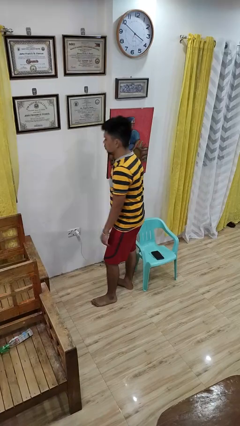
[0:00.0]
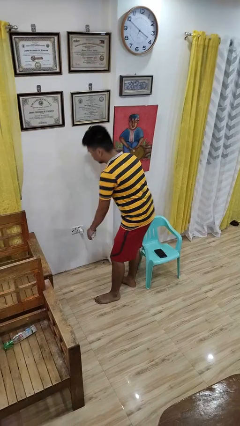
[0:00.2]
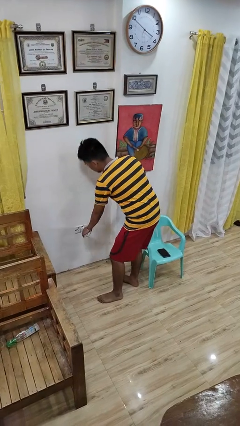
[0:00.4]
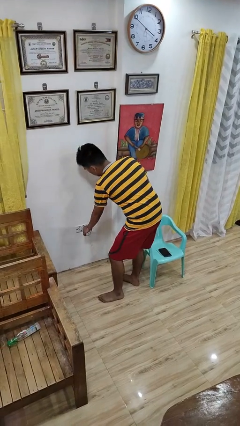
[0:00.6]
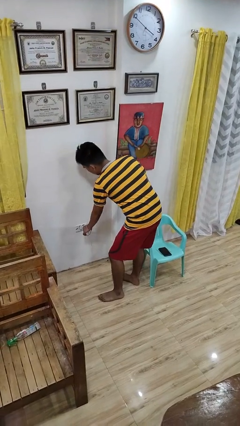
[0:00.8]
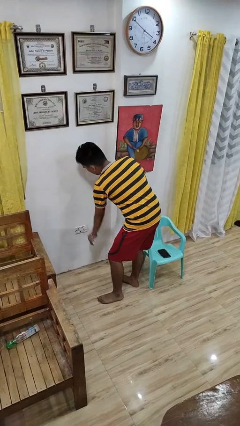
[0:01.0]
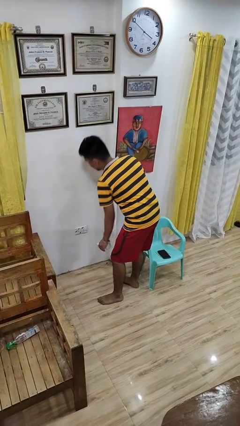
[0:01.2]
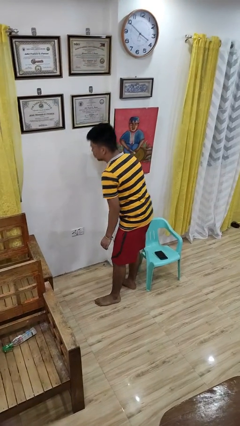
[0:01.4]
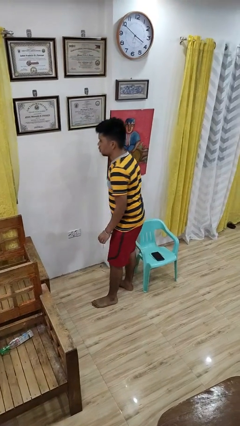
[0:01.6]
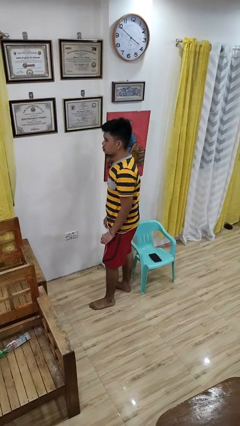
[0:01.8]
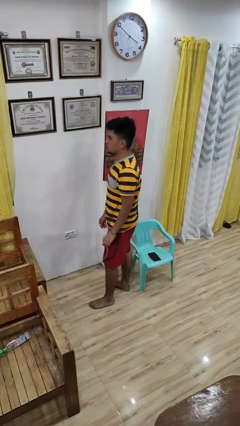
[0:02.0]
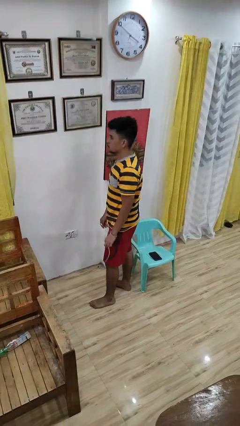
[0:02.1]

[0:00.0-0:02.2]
person unplugs from electrical socket

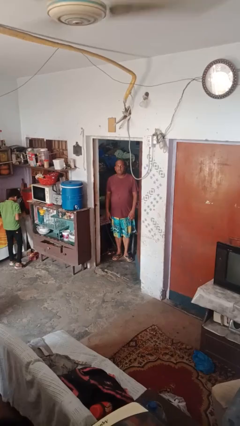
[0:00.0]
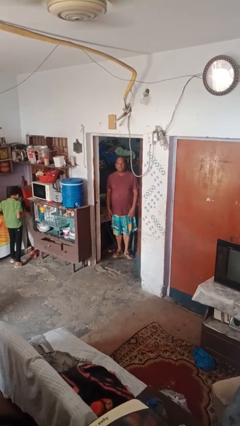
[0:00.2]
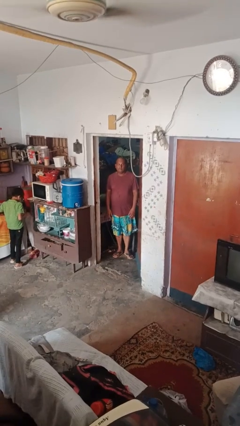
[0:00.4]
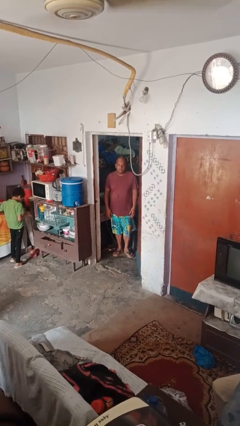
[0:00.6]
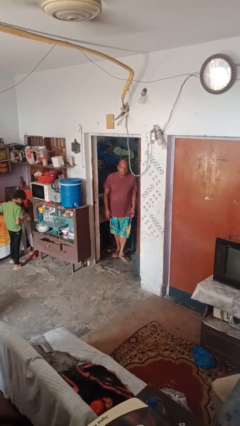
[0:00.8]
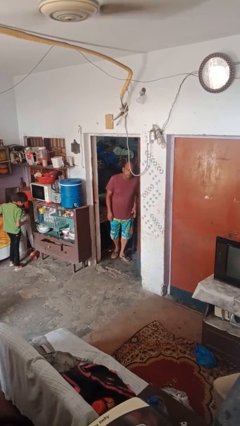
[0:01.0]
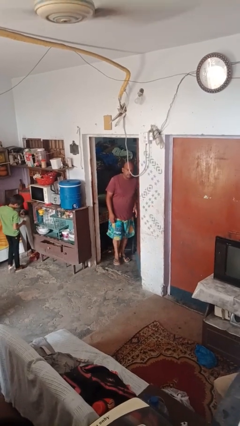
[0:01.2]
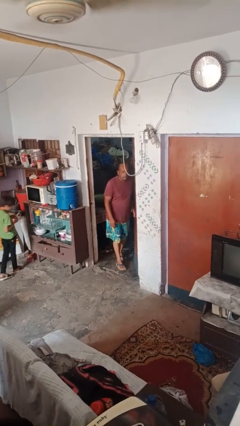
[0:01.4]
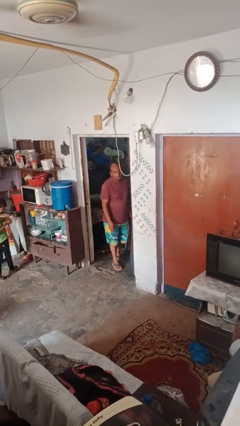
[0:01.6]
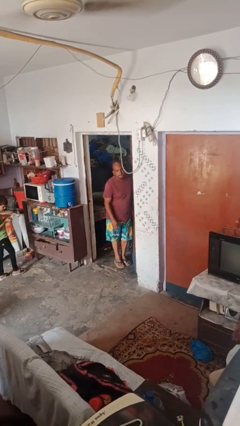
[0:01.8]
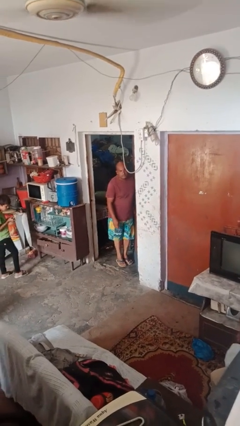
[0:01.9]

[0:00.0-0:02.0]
person bumps into wall

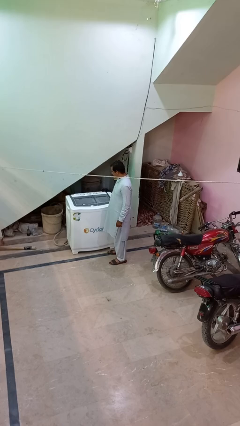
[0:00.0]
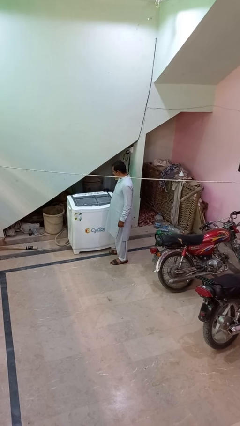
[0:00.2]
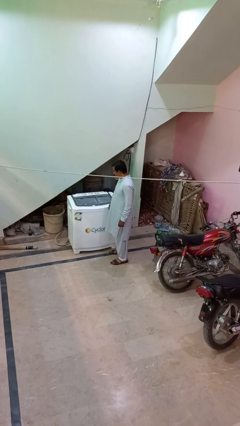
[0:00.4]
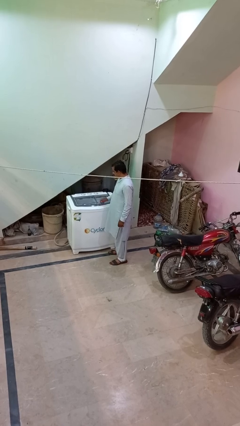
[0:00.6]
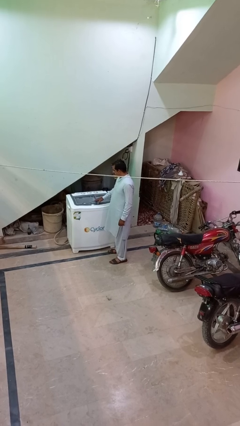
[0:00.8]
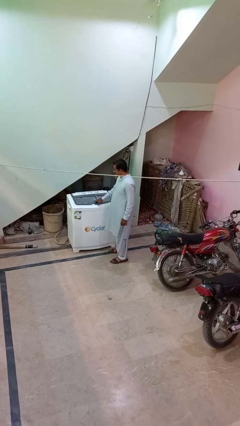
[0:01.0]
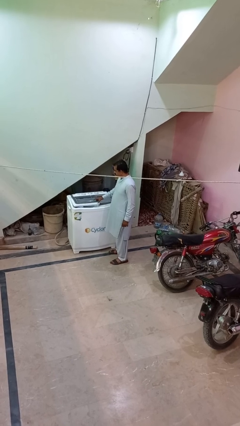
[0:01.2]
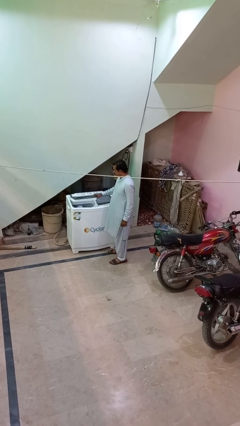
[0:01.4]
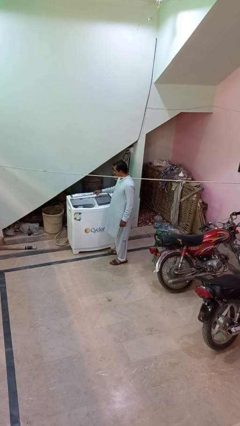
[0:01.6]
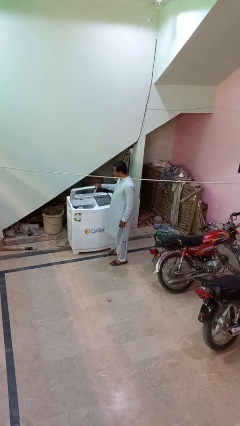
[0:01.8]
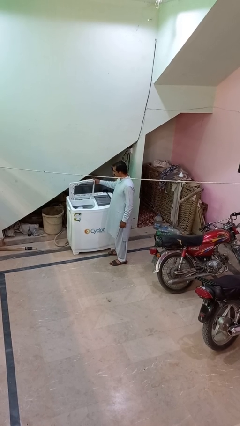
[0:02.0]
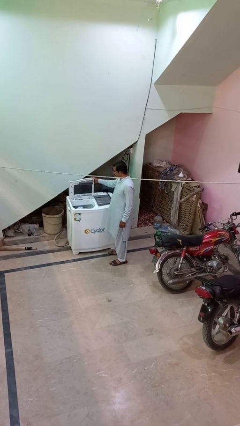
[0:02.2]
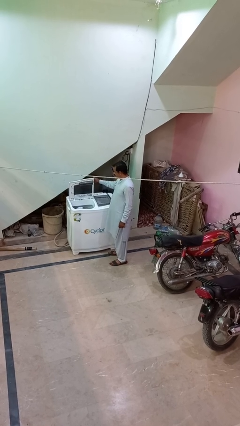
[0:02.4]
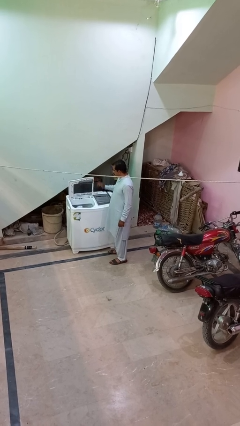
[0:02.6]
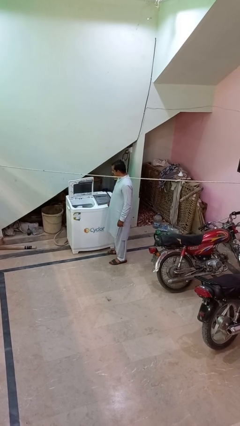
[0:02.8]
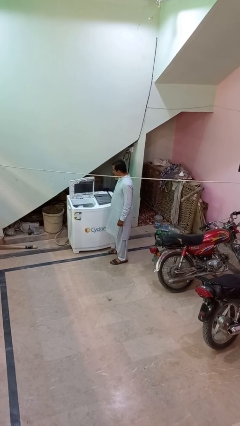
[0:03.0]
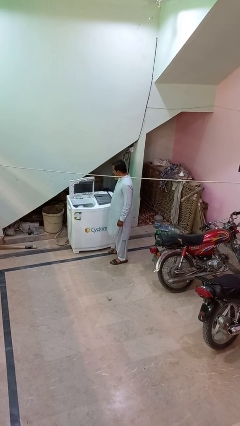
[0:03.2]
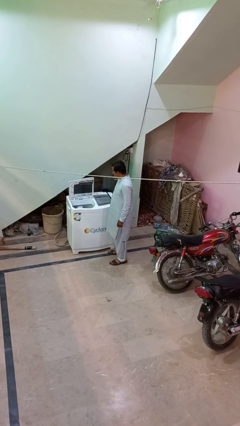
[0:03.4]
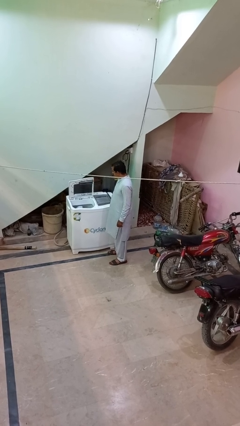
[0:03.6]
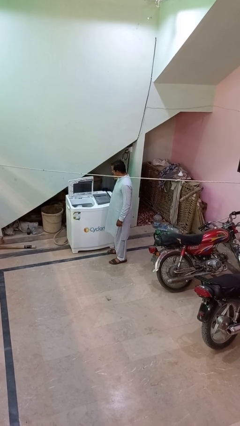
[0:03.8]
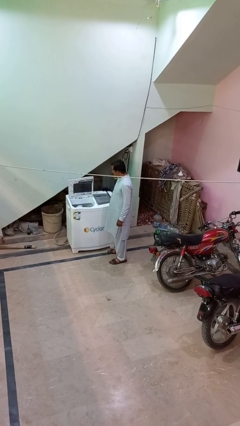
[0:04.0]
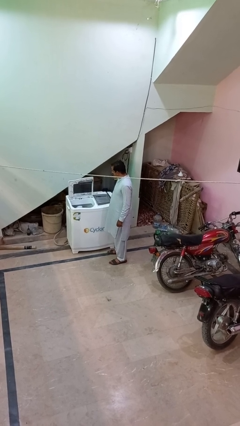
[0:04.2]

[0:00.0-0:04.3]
person opens clothes washer

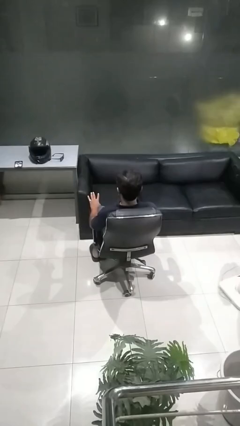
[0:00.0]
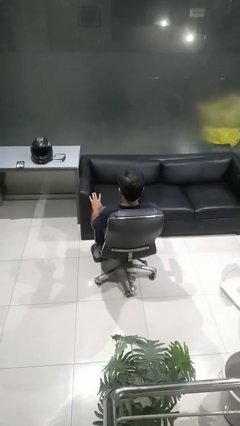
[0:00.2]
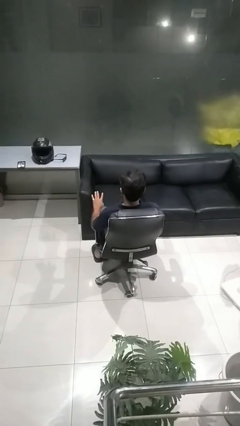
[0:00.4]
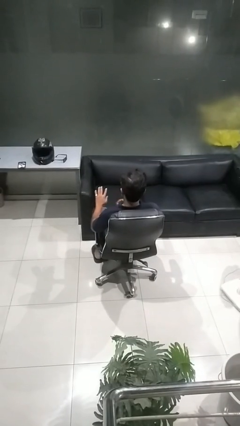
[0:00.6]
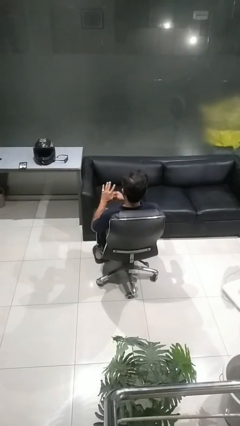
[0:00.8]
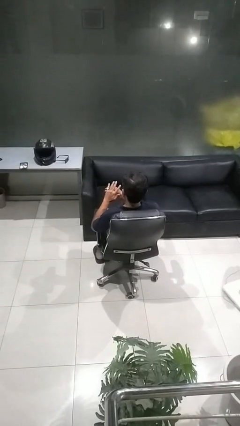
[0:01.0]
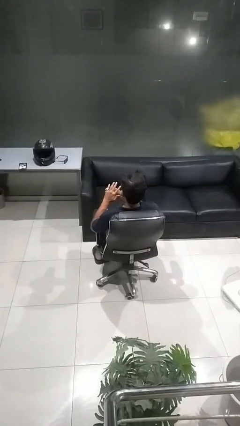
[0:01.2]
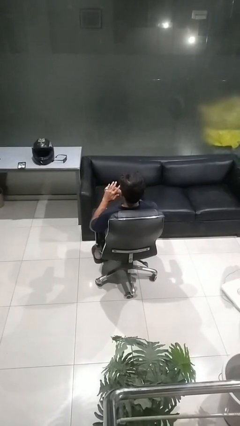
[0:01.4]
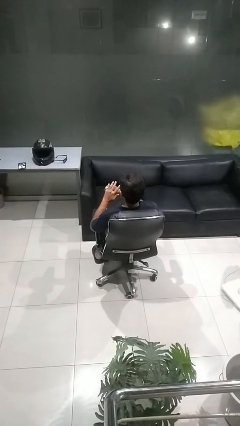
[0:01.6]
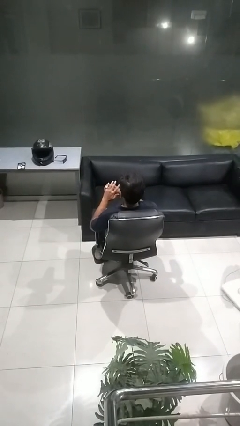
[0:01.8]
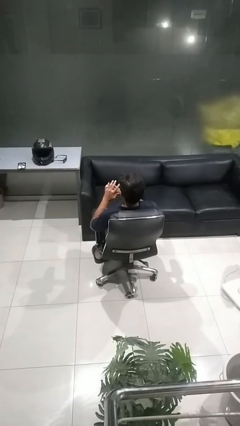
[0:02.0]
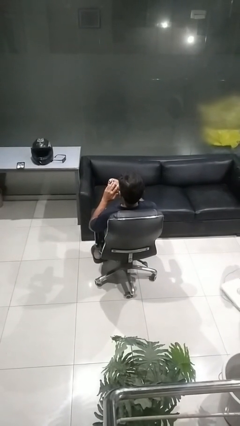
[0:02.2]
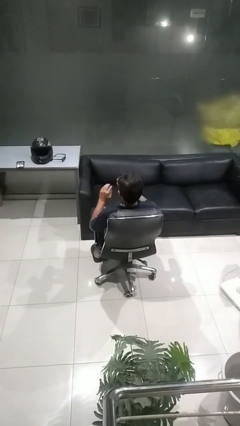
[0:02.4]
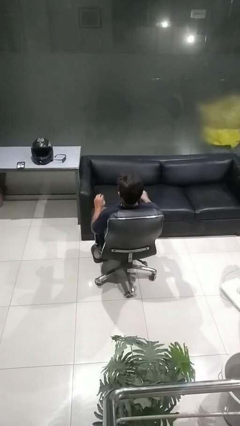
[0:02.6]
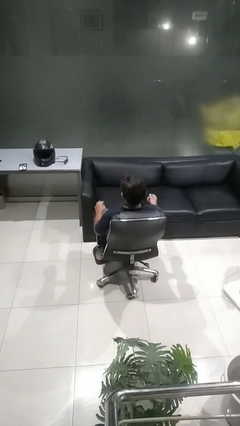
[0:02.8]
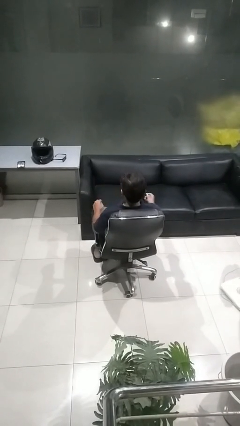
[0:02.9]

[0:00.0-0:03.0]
person takes off ring

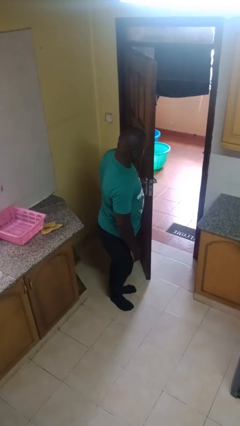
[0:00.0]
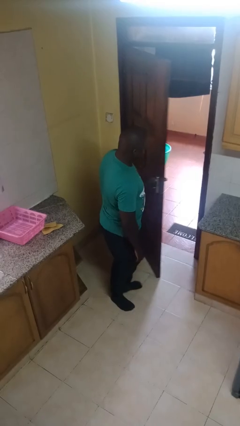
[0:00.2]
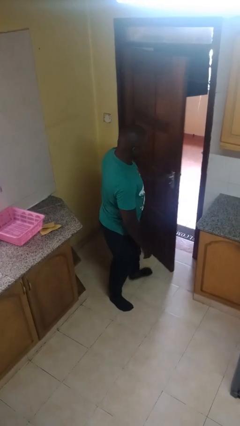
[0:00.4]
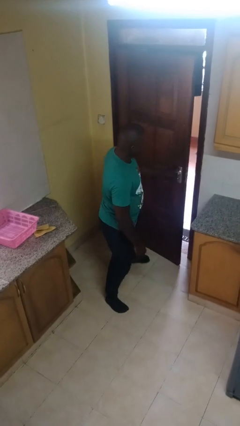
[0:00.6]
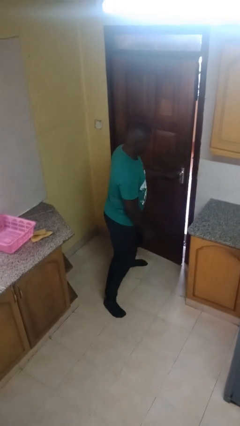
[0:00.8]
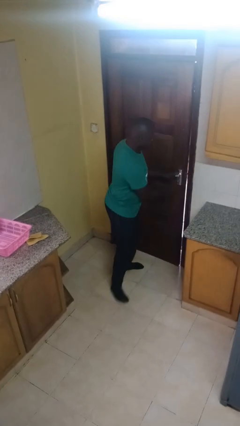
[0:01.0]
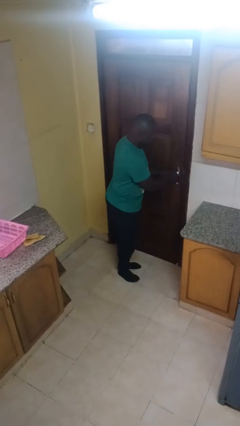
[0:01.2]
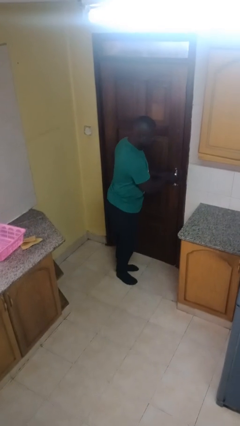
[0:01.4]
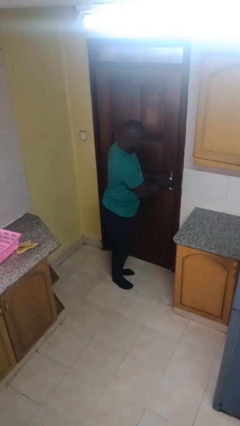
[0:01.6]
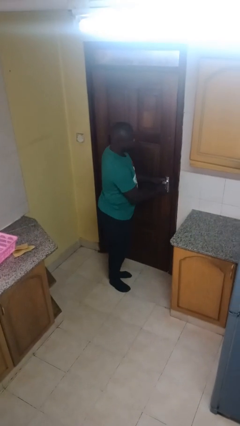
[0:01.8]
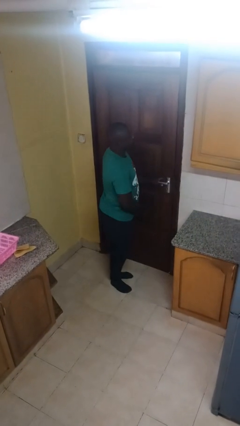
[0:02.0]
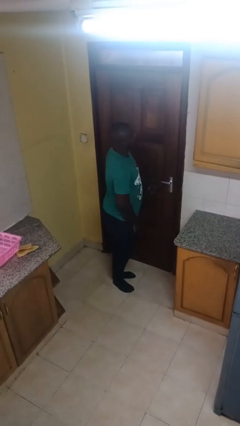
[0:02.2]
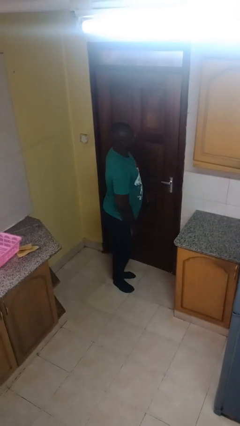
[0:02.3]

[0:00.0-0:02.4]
person closes facility door

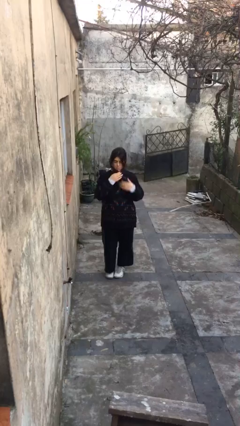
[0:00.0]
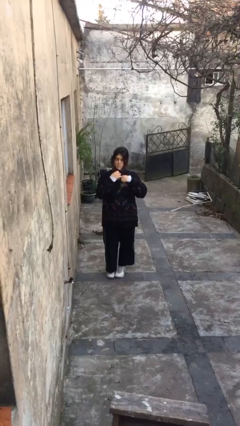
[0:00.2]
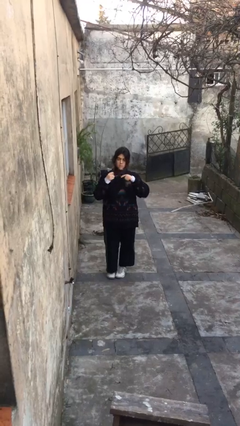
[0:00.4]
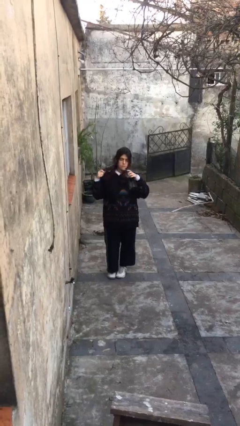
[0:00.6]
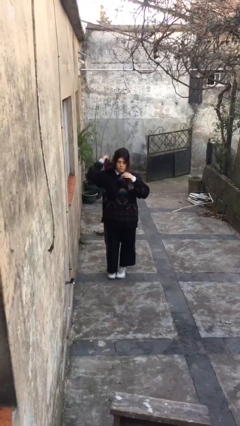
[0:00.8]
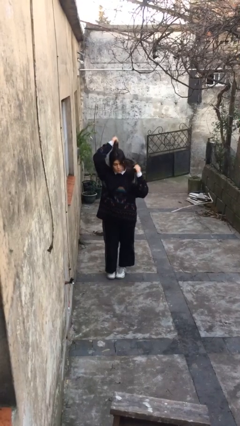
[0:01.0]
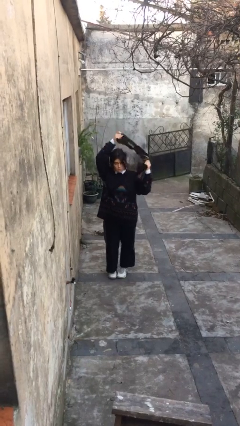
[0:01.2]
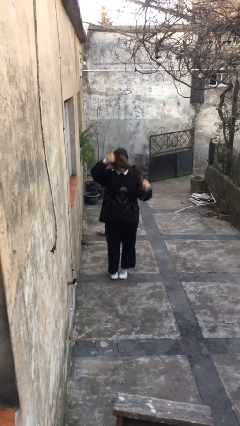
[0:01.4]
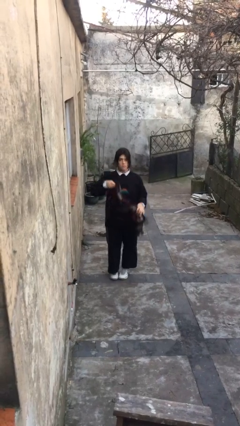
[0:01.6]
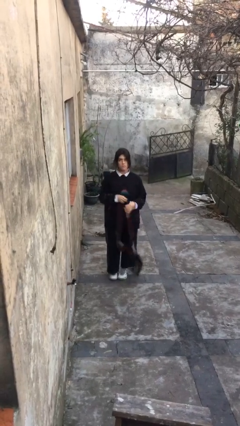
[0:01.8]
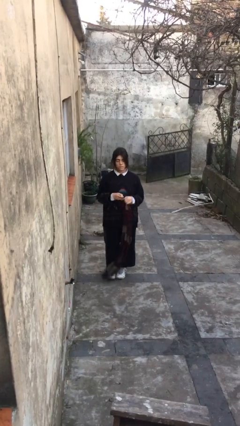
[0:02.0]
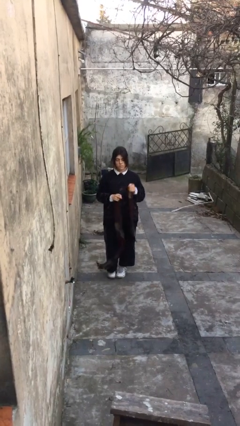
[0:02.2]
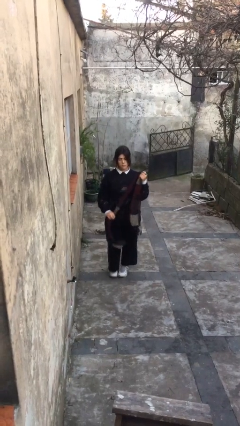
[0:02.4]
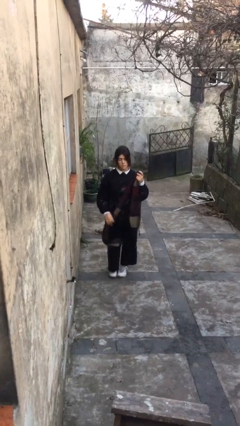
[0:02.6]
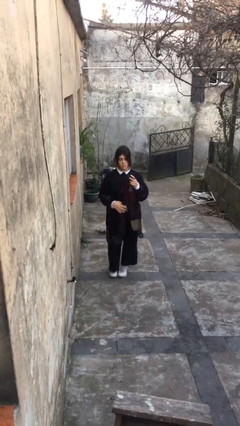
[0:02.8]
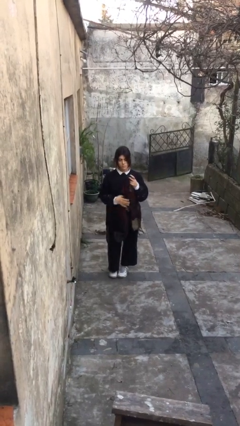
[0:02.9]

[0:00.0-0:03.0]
person takes off scarf

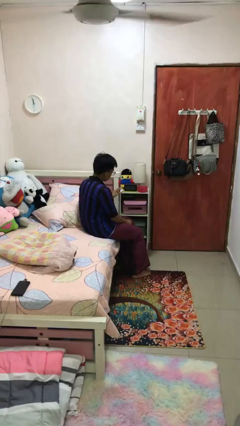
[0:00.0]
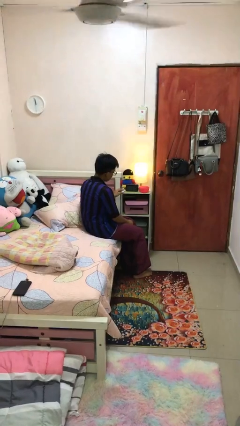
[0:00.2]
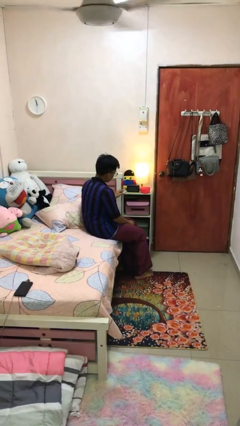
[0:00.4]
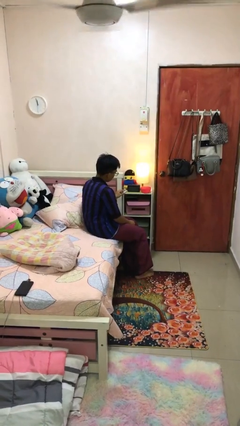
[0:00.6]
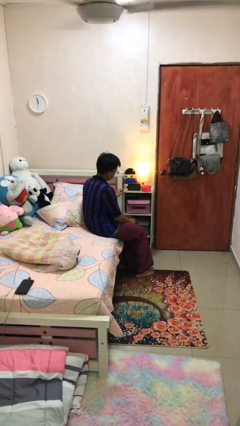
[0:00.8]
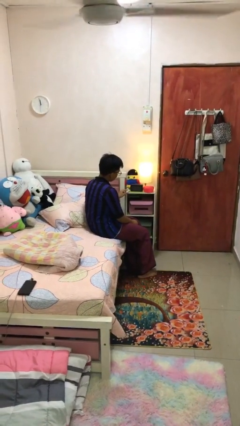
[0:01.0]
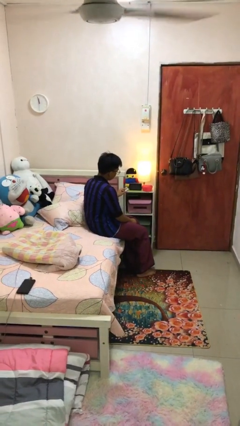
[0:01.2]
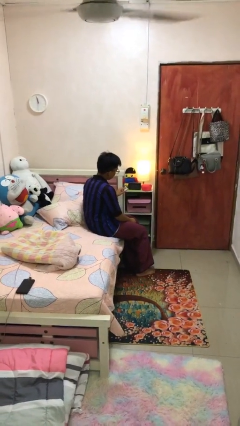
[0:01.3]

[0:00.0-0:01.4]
person turns on lamp
